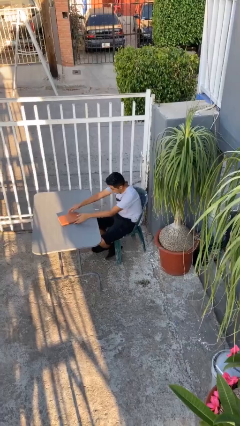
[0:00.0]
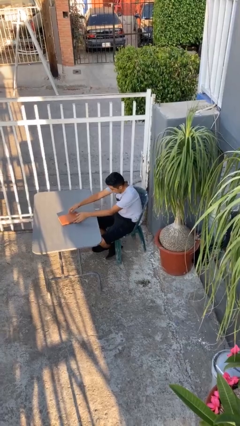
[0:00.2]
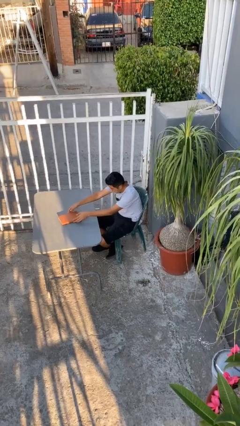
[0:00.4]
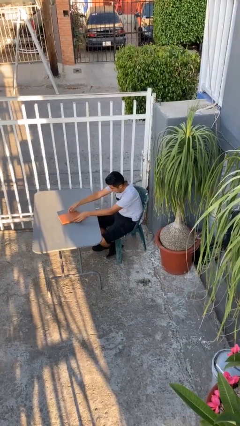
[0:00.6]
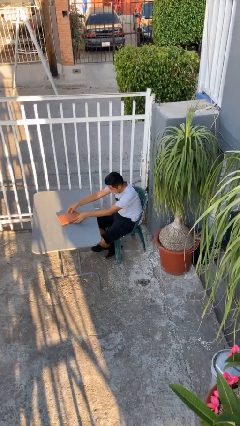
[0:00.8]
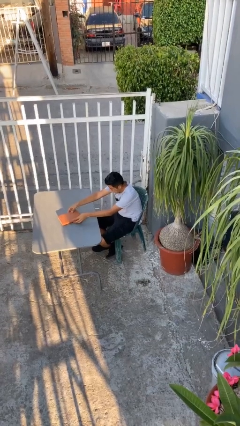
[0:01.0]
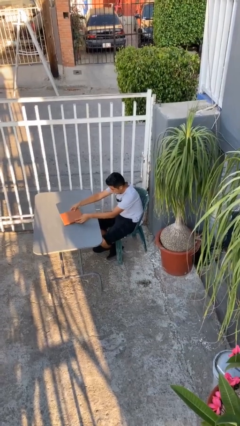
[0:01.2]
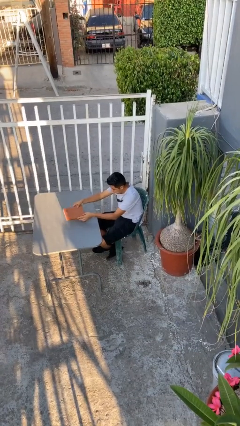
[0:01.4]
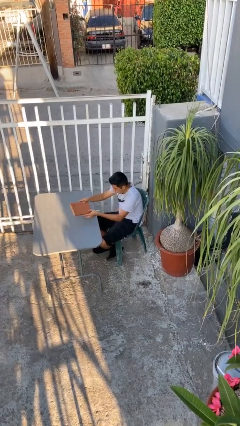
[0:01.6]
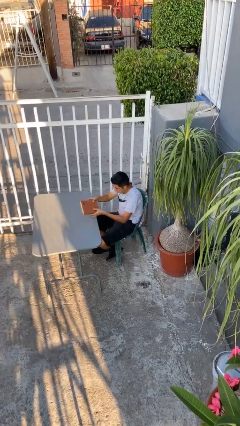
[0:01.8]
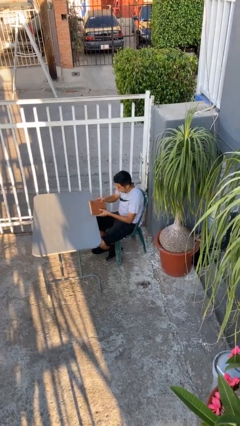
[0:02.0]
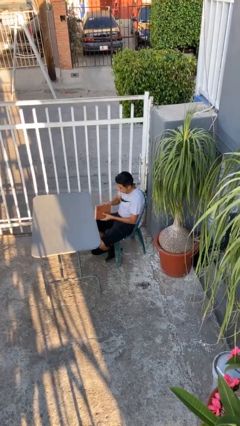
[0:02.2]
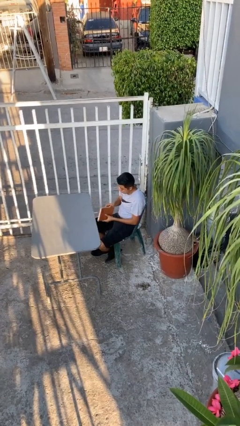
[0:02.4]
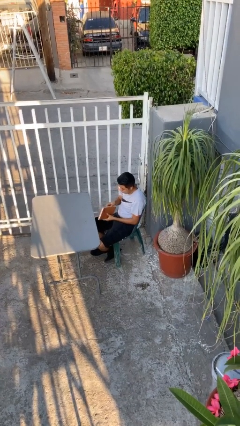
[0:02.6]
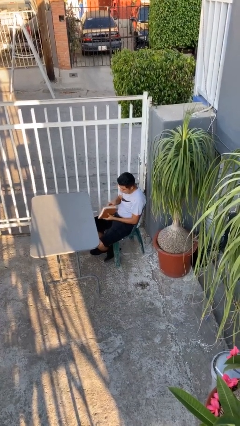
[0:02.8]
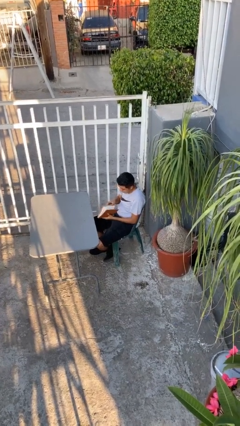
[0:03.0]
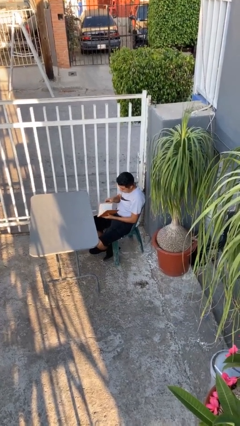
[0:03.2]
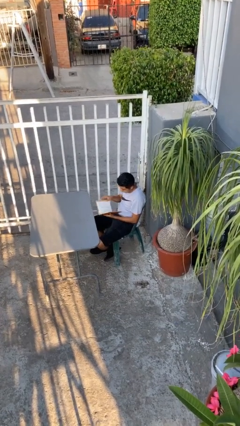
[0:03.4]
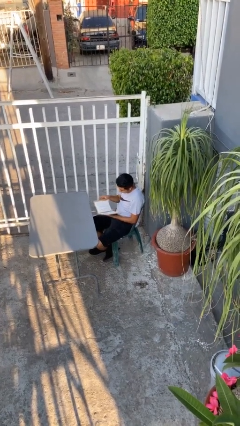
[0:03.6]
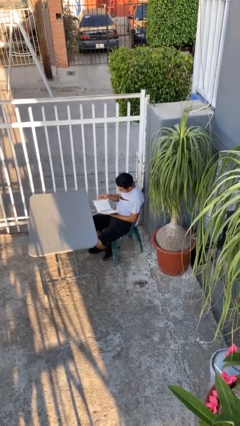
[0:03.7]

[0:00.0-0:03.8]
person picks up object from table

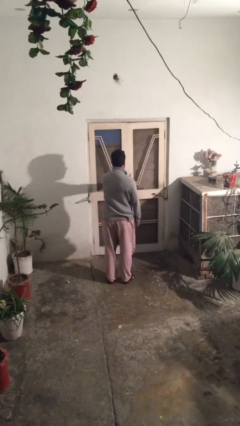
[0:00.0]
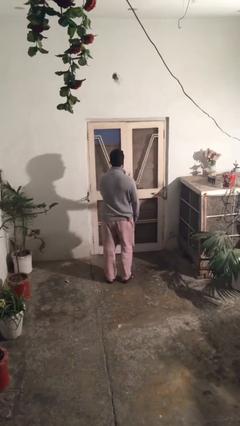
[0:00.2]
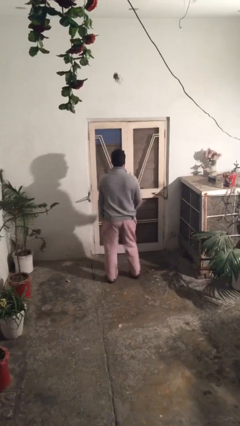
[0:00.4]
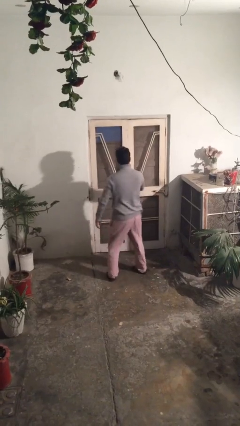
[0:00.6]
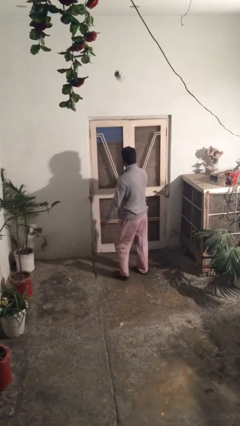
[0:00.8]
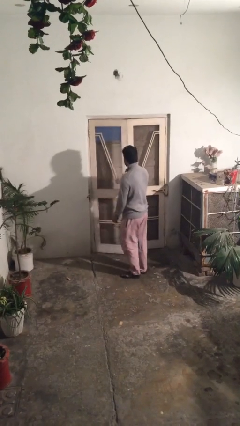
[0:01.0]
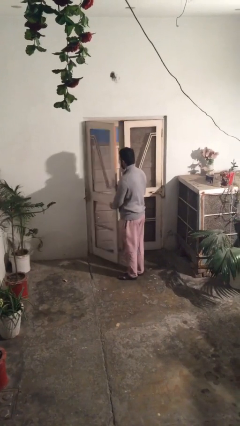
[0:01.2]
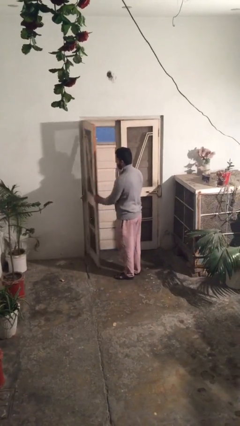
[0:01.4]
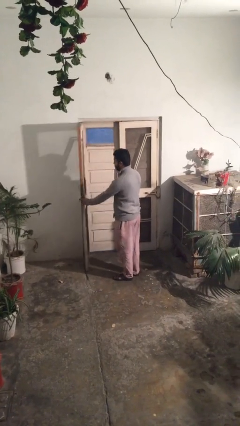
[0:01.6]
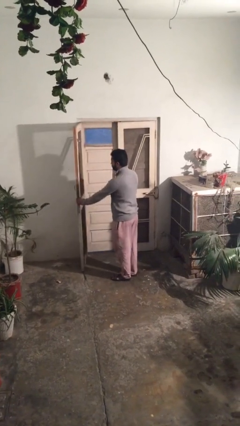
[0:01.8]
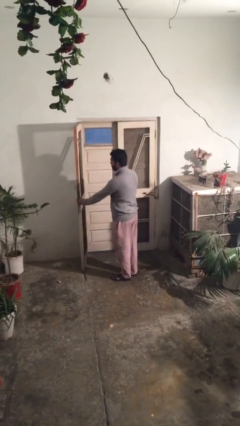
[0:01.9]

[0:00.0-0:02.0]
person opens facility door

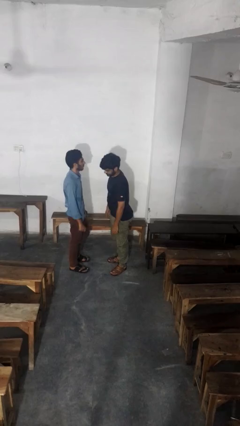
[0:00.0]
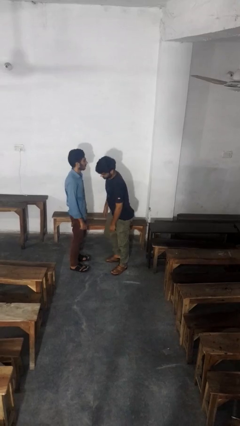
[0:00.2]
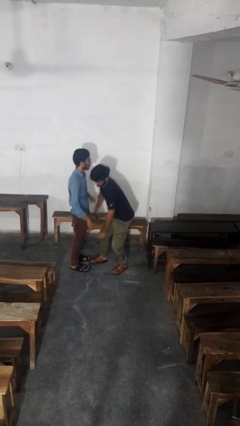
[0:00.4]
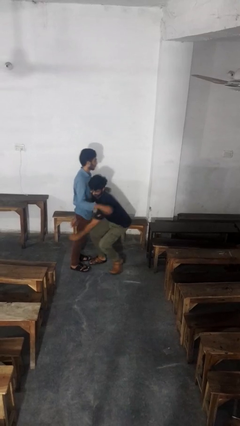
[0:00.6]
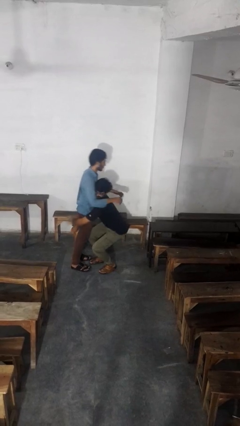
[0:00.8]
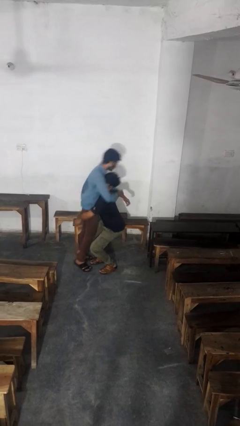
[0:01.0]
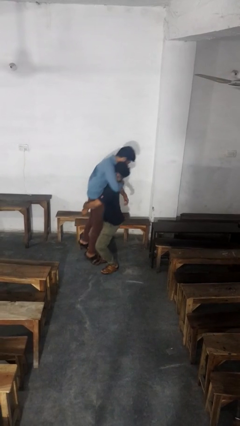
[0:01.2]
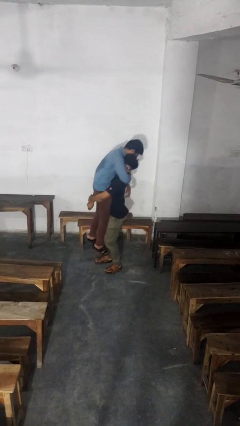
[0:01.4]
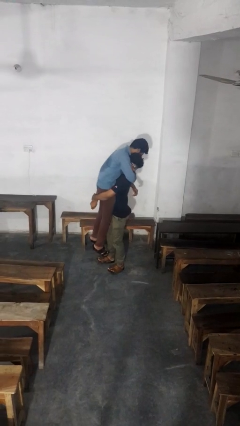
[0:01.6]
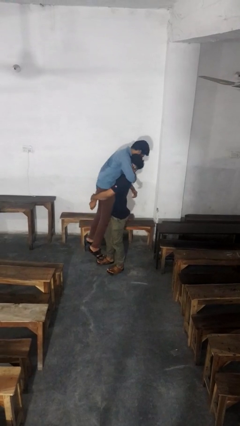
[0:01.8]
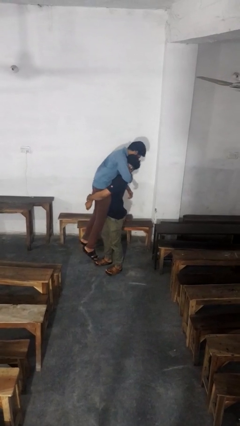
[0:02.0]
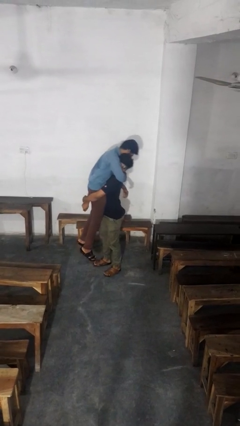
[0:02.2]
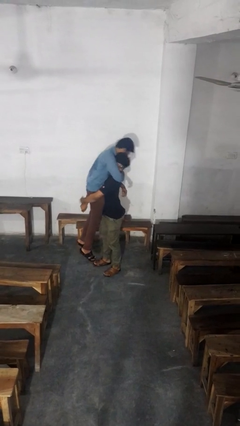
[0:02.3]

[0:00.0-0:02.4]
person picks up person

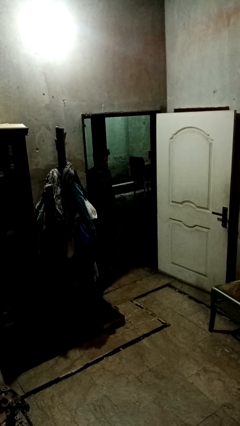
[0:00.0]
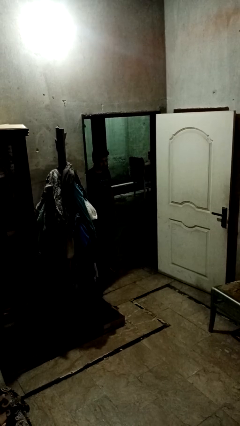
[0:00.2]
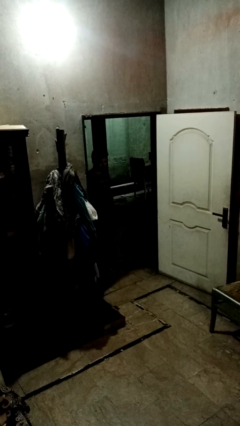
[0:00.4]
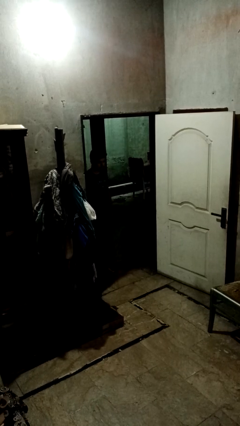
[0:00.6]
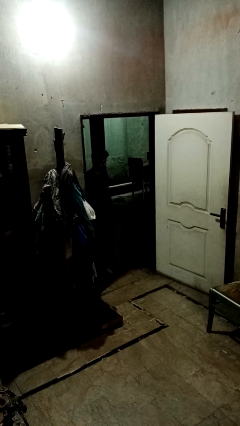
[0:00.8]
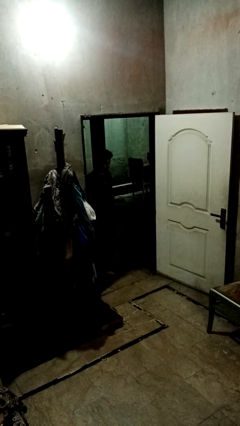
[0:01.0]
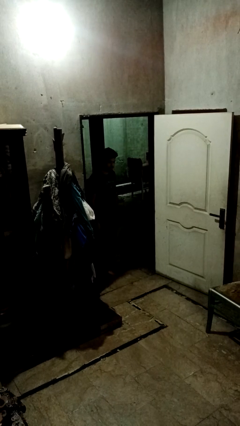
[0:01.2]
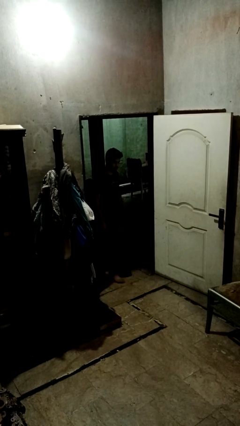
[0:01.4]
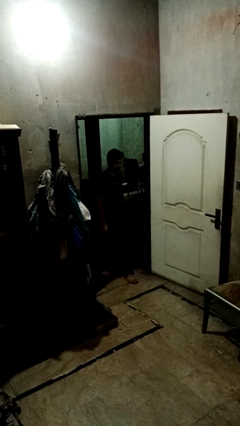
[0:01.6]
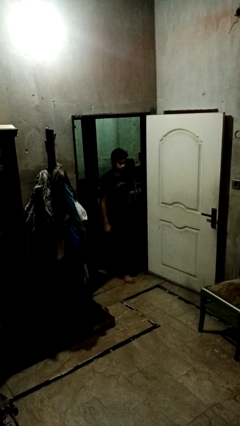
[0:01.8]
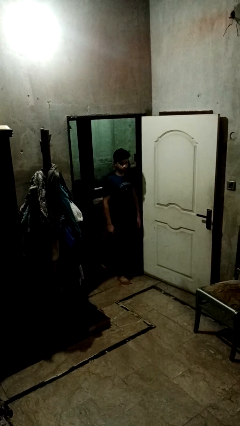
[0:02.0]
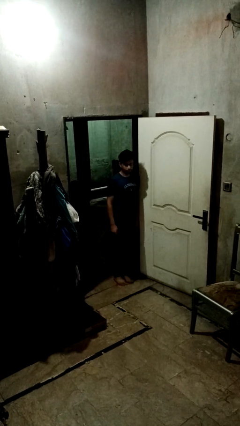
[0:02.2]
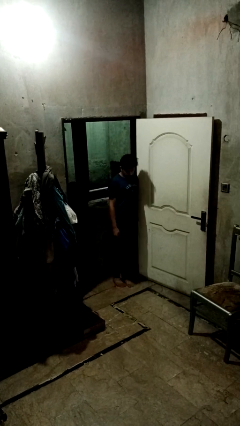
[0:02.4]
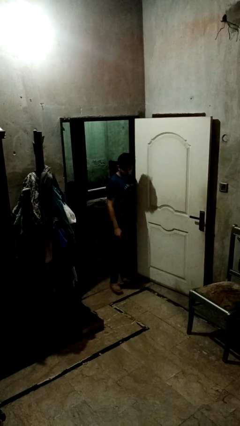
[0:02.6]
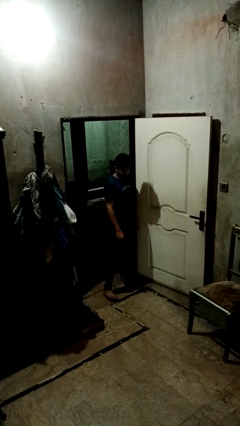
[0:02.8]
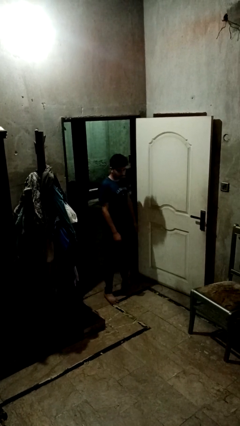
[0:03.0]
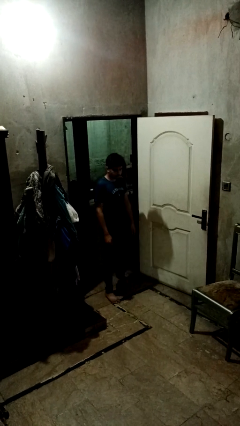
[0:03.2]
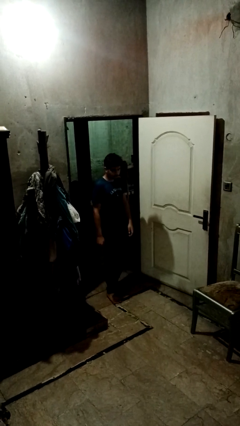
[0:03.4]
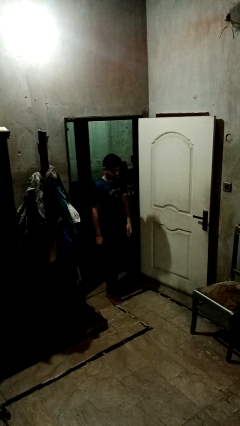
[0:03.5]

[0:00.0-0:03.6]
person bumps into wall

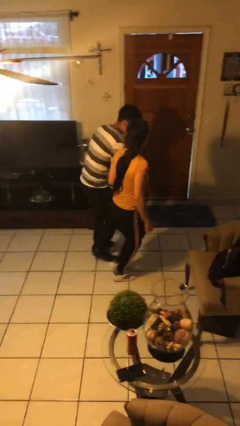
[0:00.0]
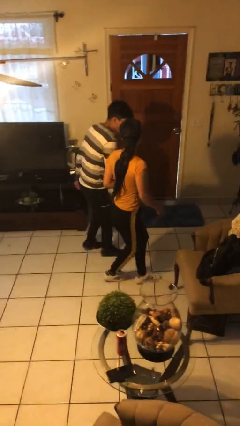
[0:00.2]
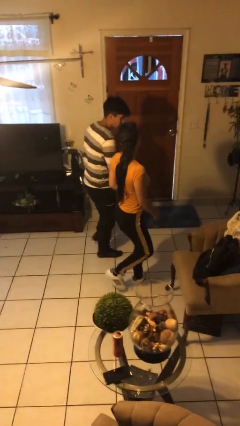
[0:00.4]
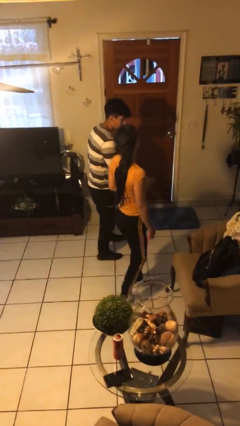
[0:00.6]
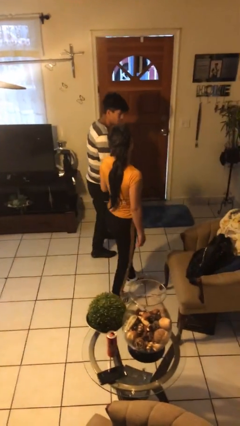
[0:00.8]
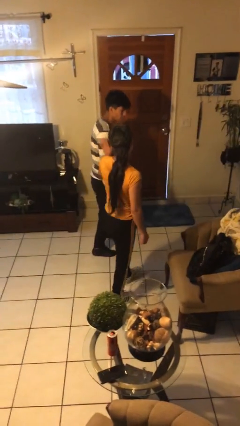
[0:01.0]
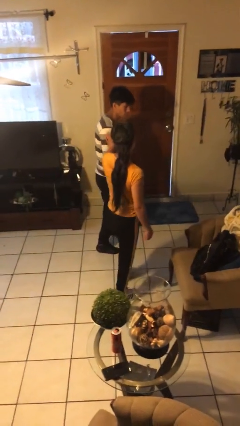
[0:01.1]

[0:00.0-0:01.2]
person bumps into person

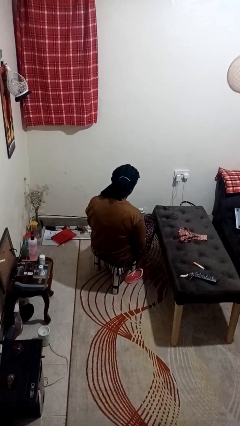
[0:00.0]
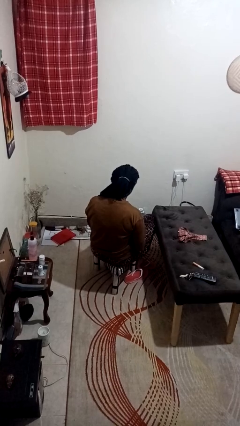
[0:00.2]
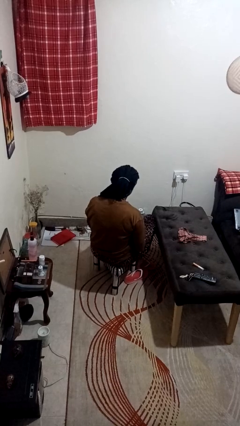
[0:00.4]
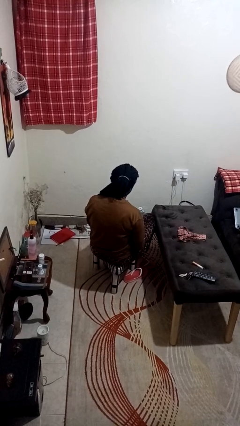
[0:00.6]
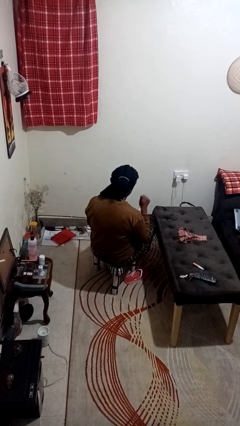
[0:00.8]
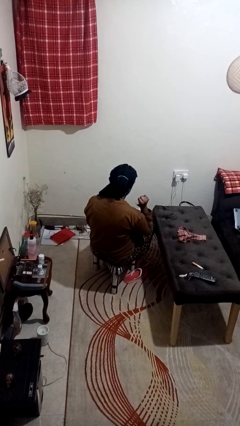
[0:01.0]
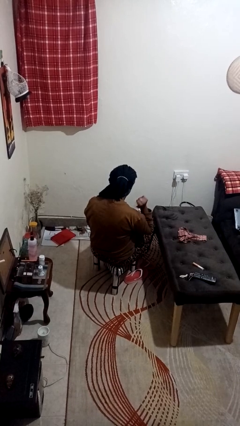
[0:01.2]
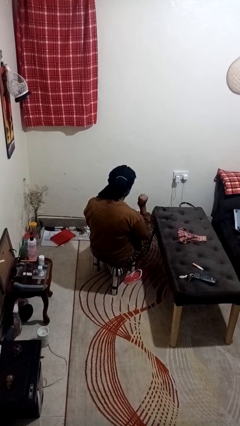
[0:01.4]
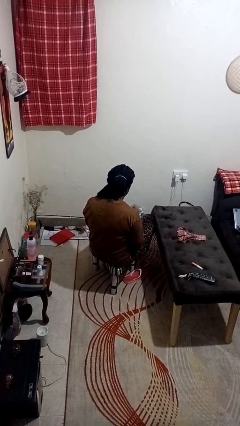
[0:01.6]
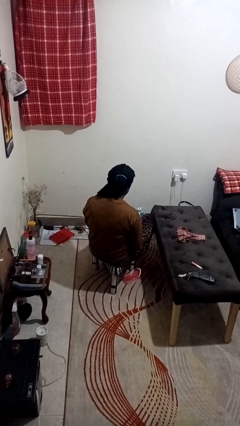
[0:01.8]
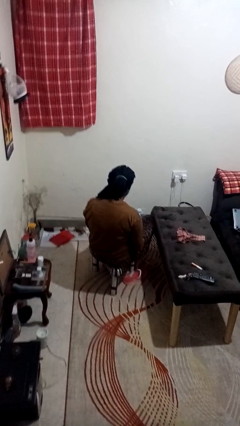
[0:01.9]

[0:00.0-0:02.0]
person gestures behind me

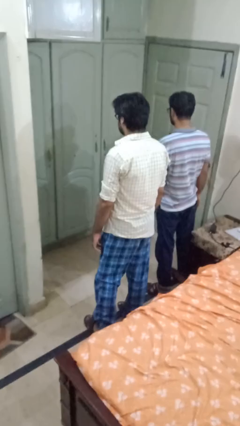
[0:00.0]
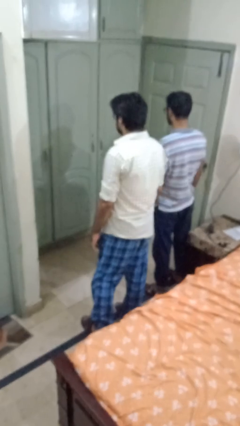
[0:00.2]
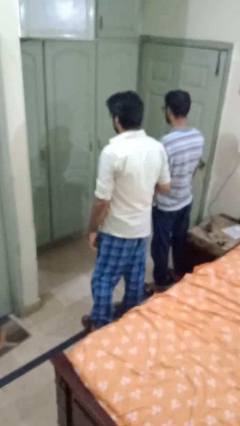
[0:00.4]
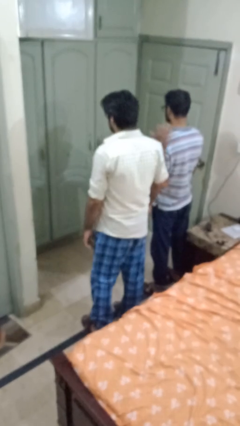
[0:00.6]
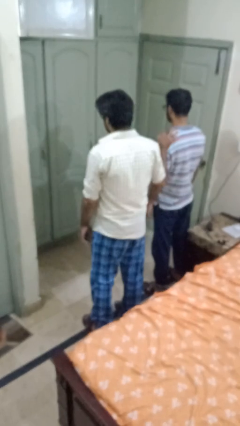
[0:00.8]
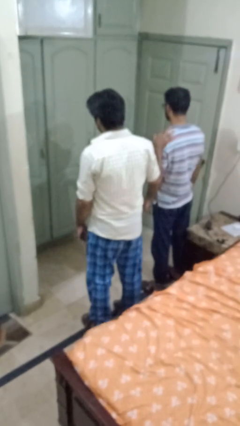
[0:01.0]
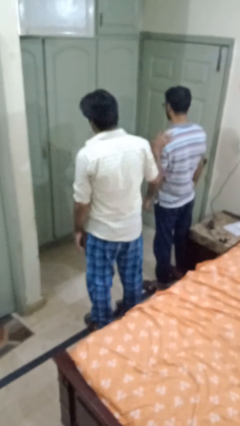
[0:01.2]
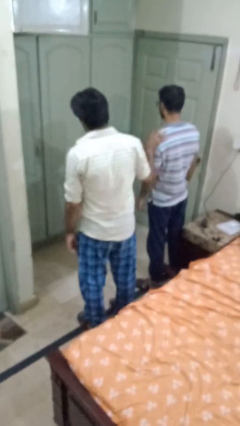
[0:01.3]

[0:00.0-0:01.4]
person grabs person by shoulder

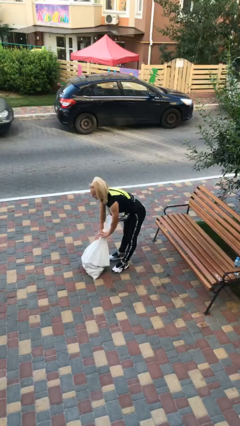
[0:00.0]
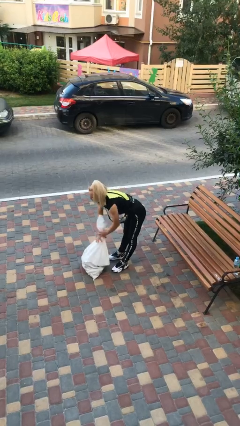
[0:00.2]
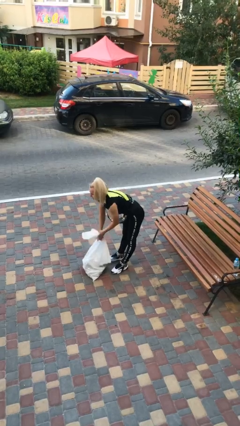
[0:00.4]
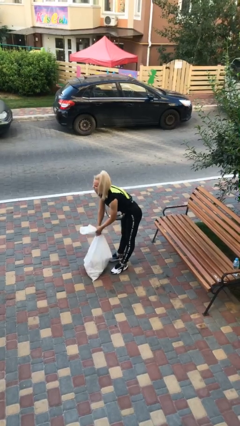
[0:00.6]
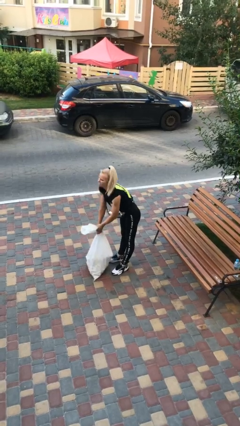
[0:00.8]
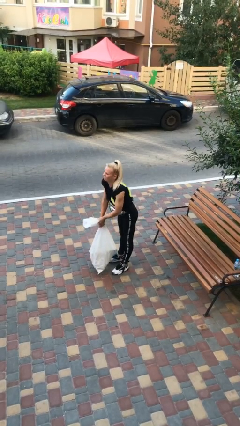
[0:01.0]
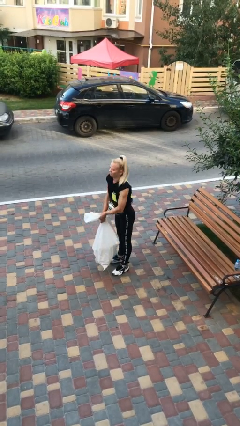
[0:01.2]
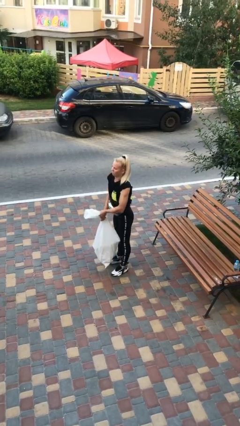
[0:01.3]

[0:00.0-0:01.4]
person picks up object from floor
